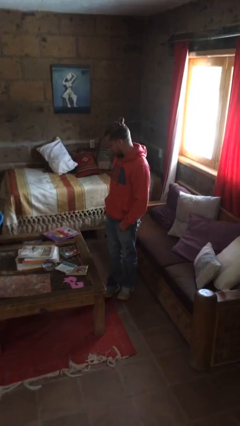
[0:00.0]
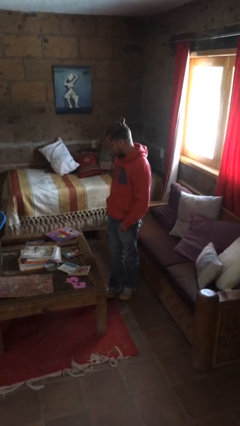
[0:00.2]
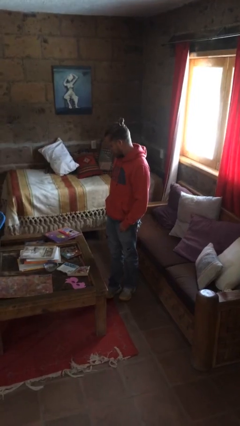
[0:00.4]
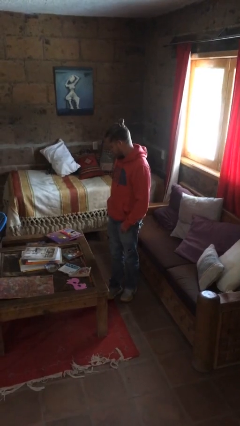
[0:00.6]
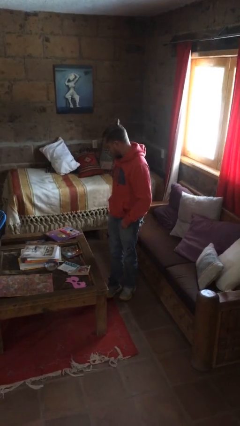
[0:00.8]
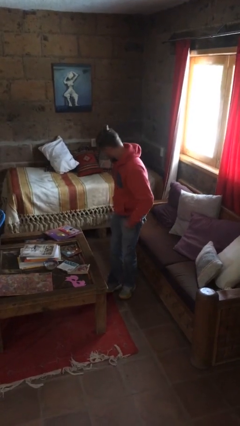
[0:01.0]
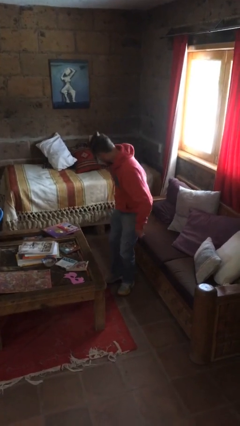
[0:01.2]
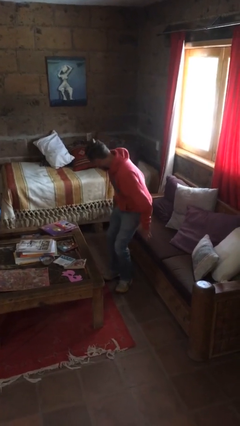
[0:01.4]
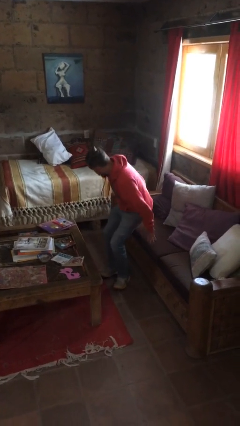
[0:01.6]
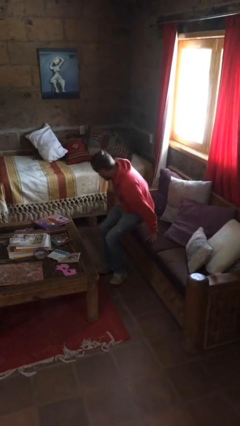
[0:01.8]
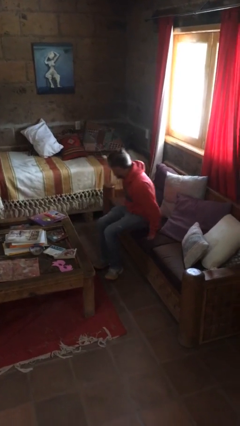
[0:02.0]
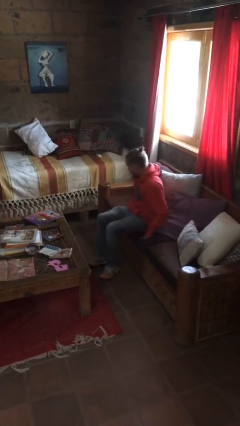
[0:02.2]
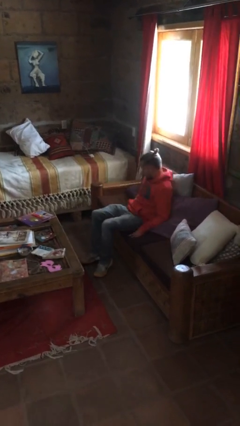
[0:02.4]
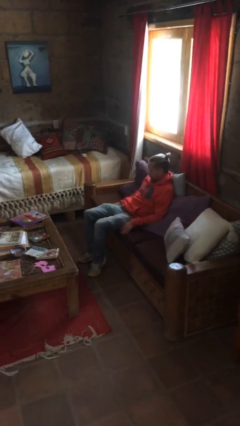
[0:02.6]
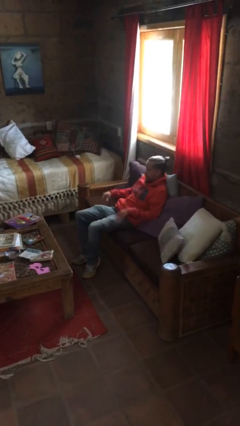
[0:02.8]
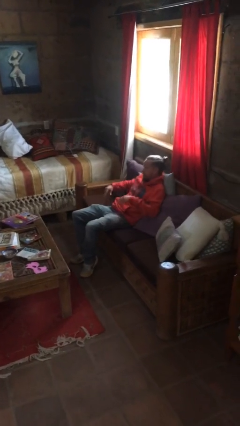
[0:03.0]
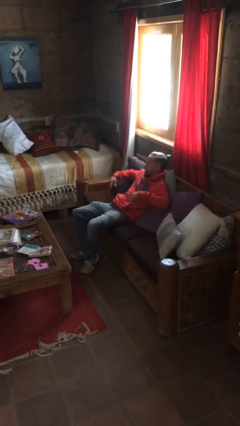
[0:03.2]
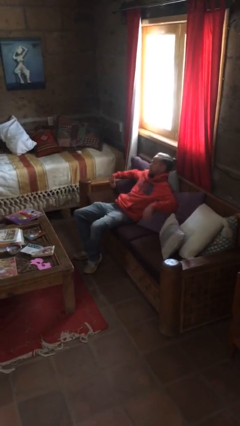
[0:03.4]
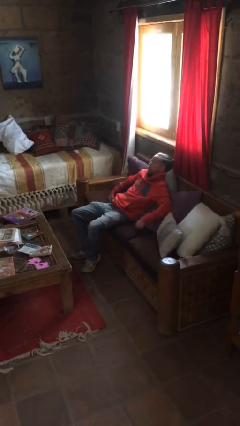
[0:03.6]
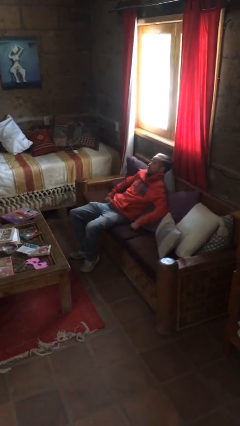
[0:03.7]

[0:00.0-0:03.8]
person lies down on couch

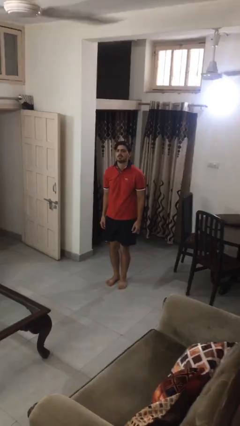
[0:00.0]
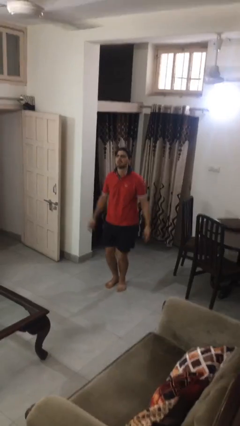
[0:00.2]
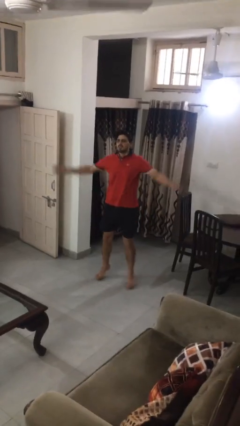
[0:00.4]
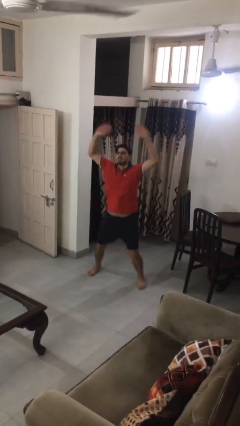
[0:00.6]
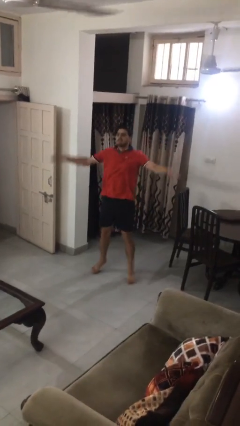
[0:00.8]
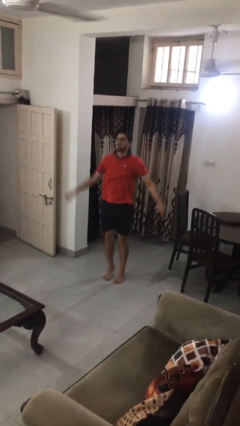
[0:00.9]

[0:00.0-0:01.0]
person exercises with jumping jacks

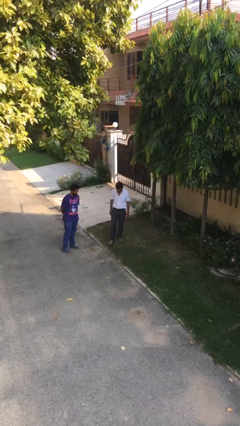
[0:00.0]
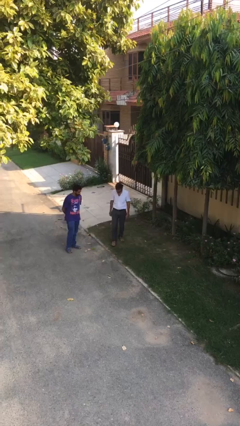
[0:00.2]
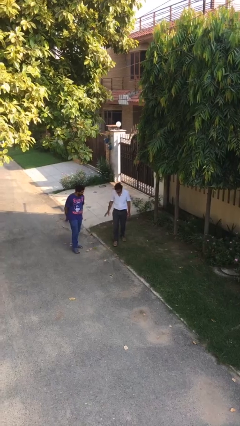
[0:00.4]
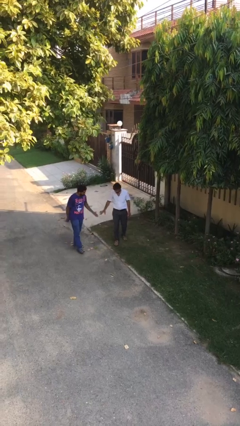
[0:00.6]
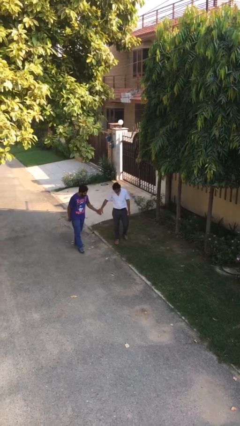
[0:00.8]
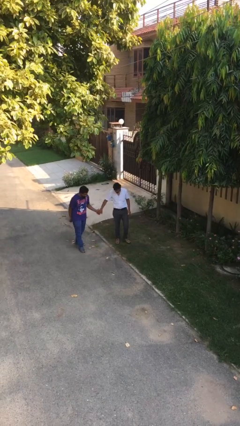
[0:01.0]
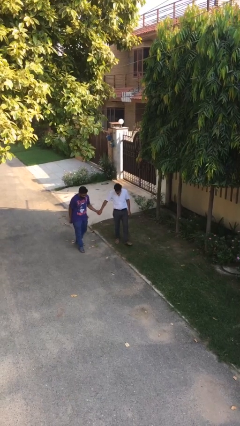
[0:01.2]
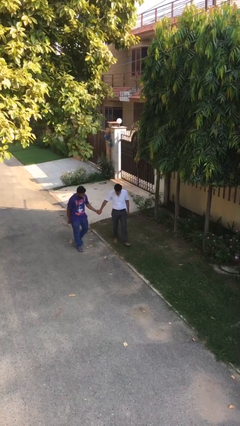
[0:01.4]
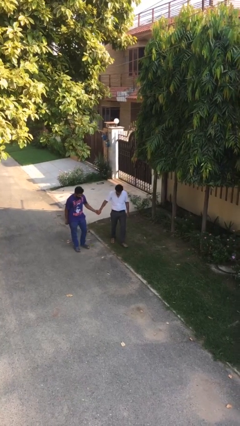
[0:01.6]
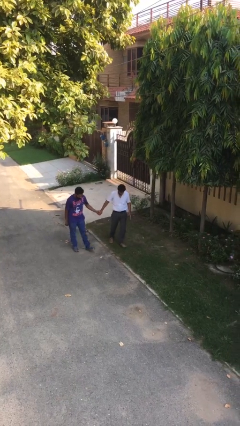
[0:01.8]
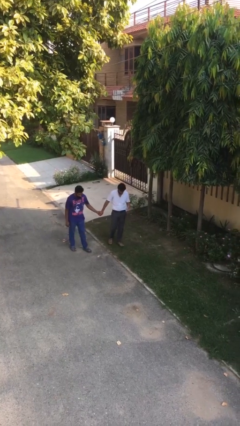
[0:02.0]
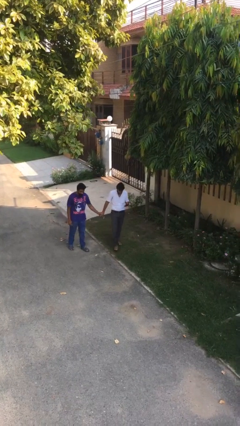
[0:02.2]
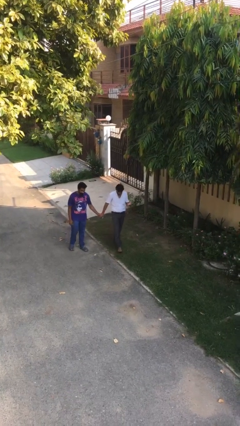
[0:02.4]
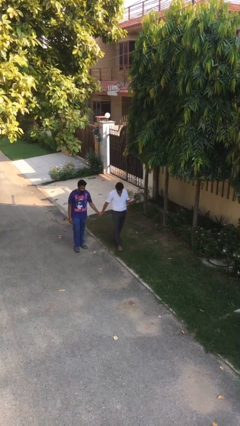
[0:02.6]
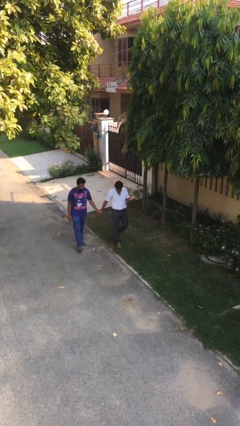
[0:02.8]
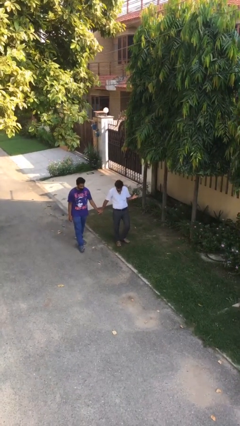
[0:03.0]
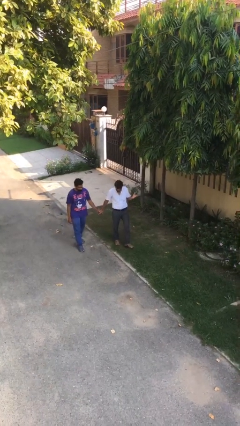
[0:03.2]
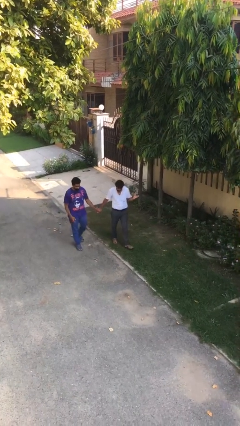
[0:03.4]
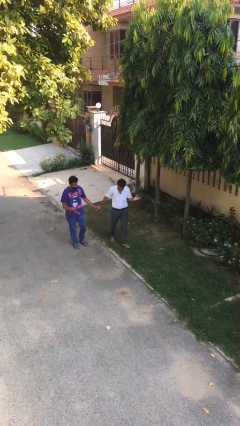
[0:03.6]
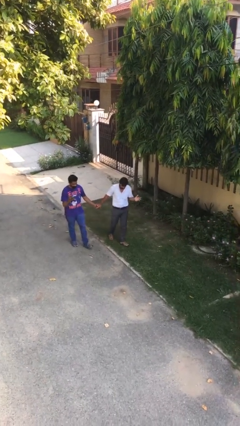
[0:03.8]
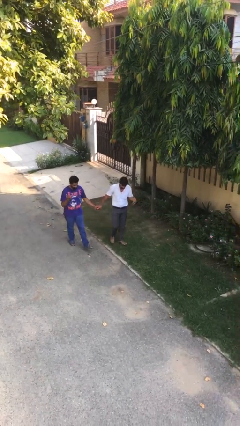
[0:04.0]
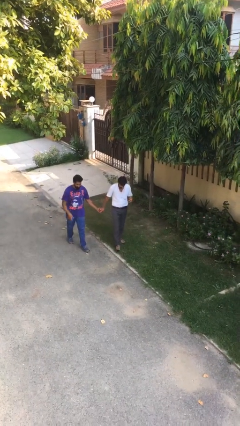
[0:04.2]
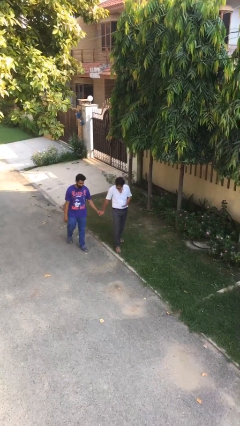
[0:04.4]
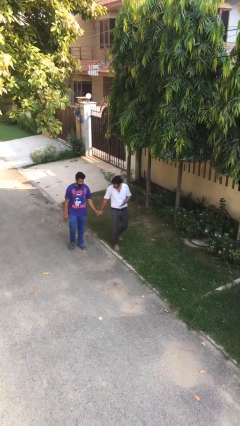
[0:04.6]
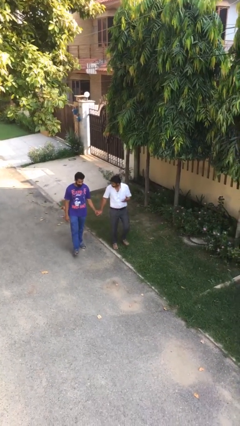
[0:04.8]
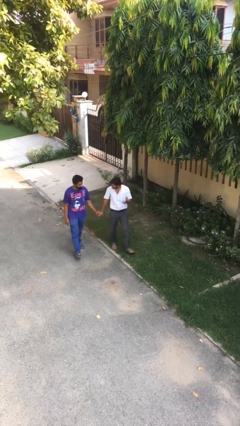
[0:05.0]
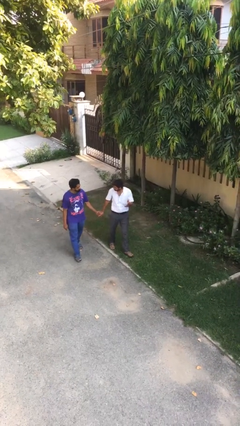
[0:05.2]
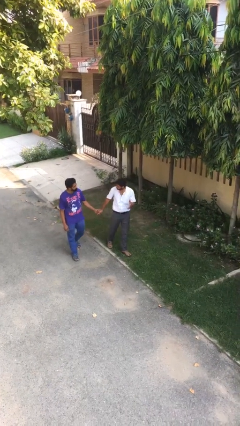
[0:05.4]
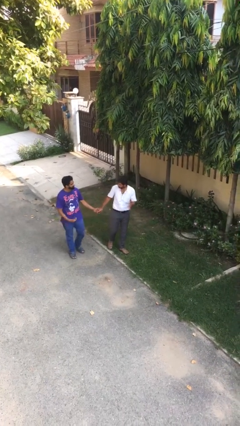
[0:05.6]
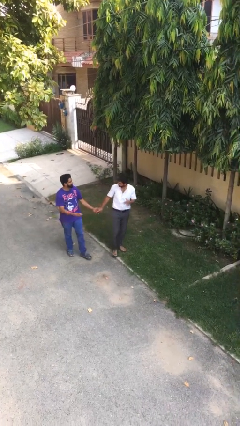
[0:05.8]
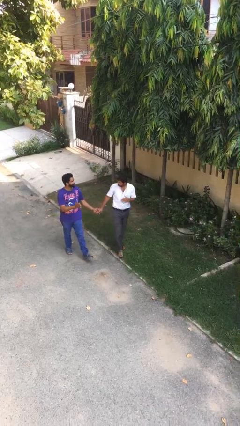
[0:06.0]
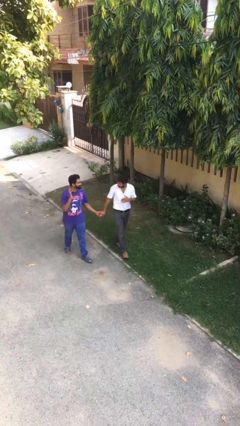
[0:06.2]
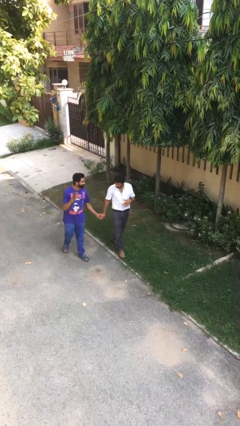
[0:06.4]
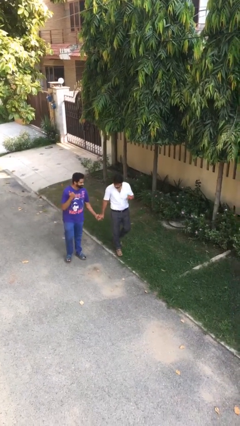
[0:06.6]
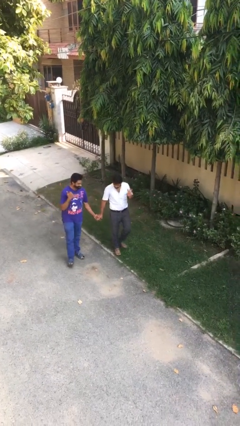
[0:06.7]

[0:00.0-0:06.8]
person holds hand

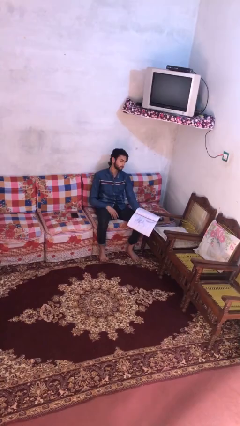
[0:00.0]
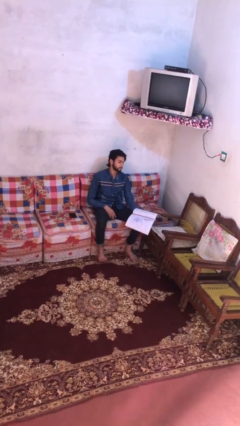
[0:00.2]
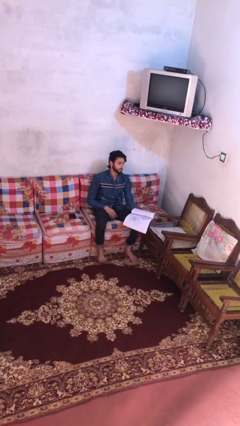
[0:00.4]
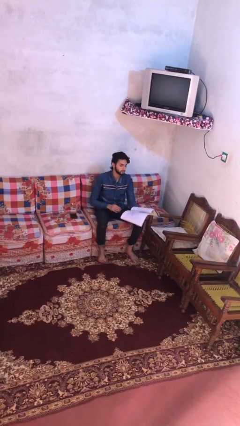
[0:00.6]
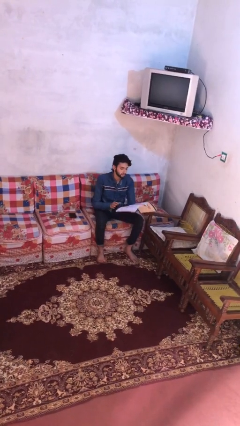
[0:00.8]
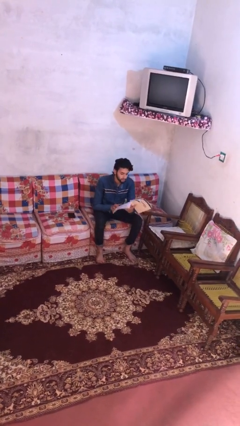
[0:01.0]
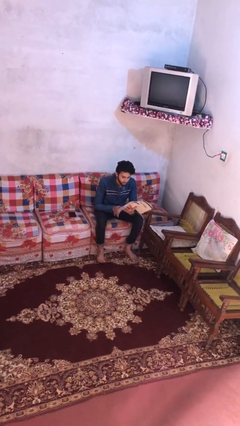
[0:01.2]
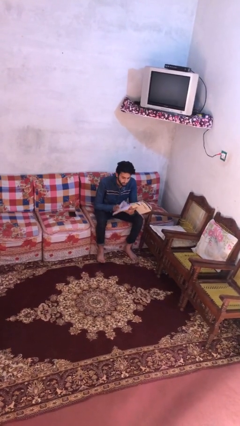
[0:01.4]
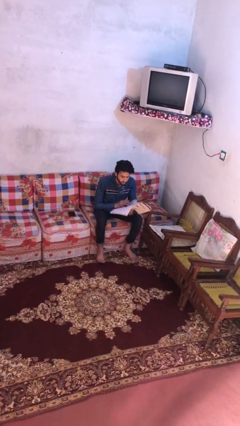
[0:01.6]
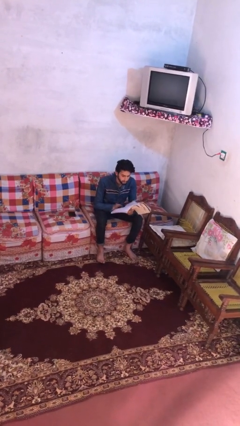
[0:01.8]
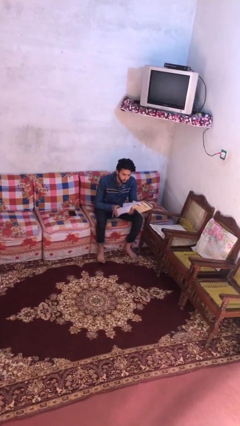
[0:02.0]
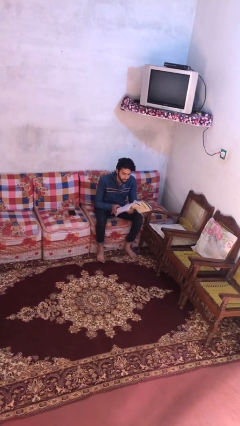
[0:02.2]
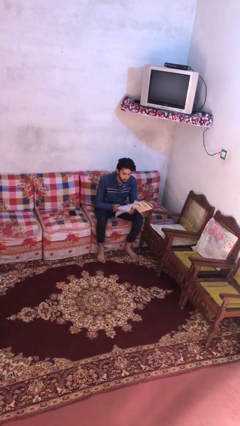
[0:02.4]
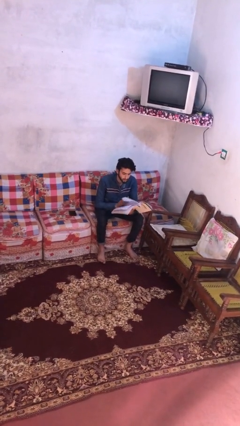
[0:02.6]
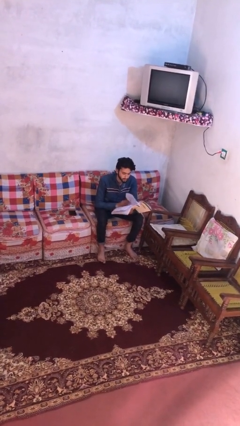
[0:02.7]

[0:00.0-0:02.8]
person reads document

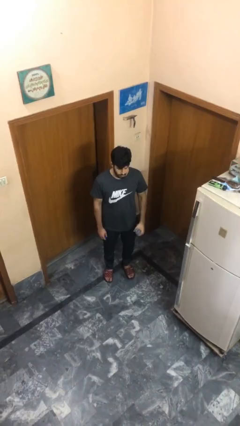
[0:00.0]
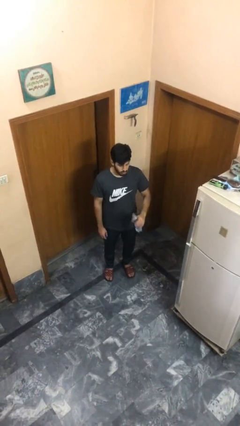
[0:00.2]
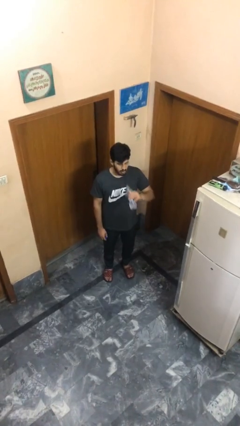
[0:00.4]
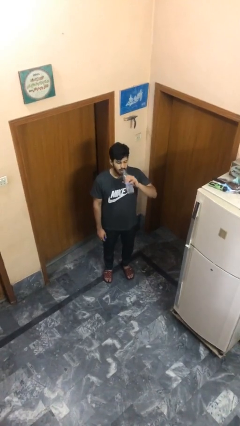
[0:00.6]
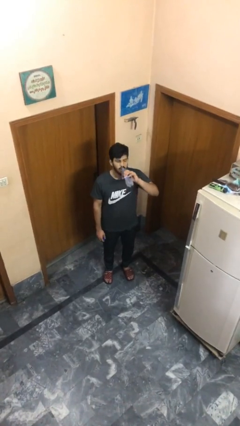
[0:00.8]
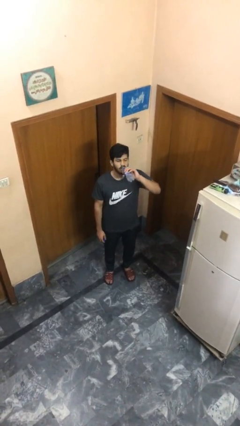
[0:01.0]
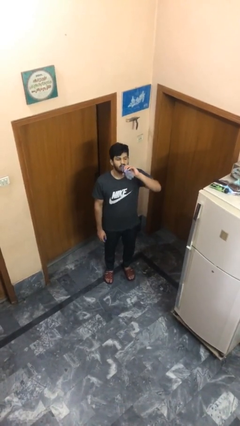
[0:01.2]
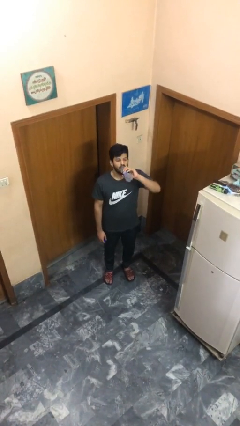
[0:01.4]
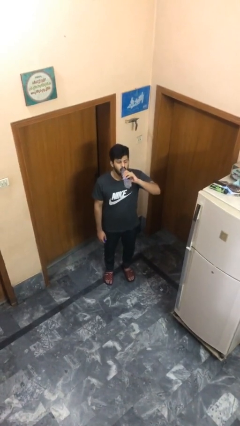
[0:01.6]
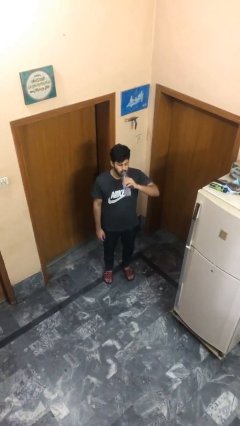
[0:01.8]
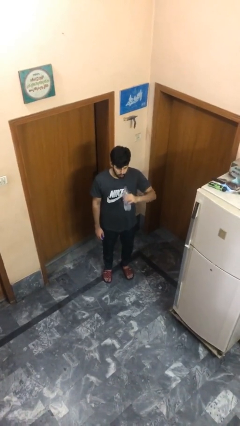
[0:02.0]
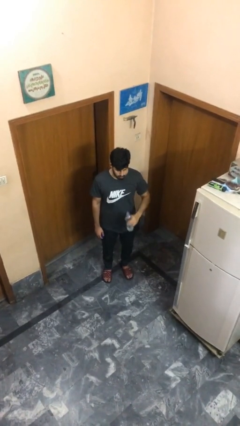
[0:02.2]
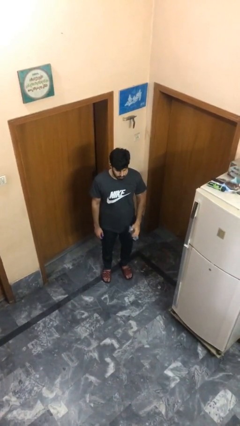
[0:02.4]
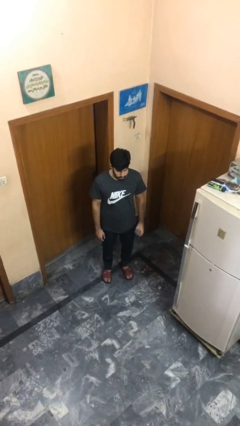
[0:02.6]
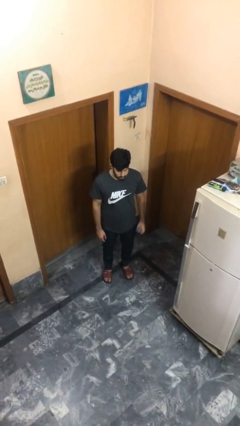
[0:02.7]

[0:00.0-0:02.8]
person drinks from bottle

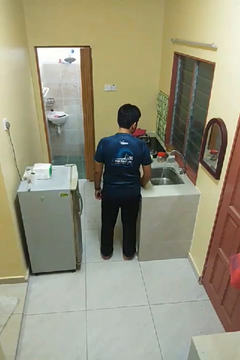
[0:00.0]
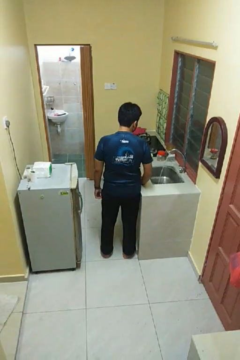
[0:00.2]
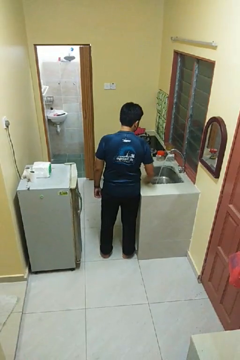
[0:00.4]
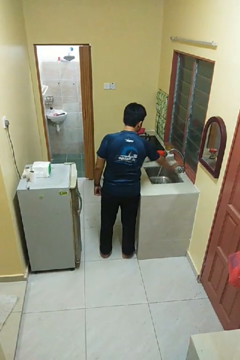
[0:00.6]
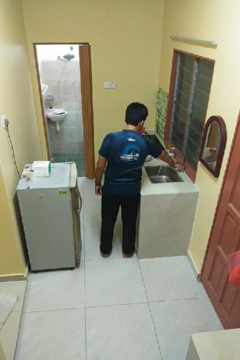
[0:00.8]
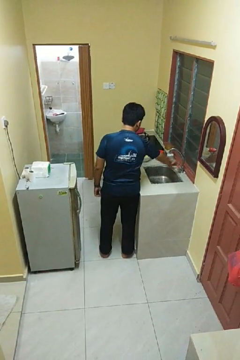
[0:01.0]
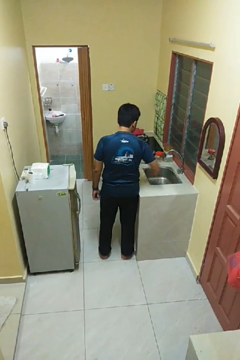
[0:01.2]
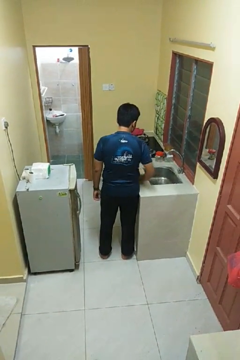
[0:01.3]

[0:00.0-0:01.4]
person turns off faucet
